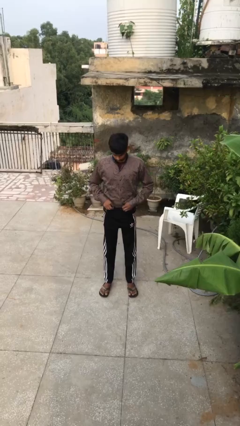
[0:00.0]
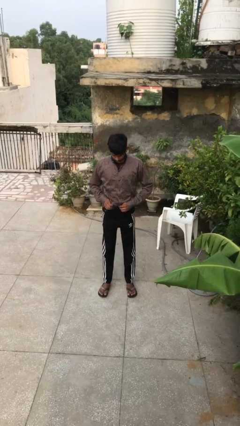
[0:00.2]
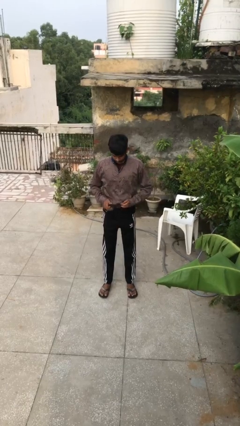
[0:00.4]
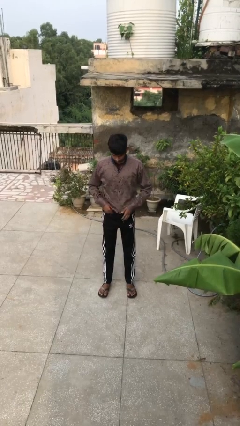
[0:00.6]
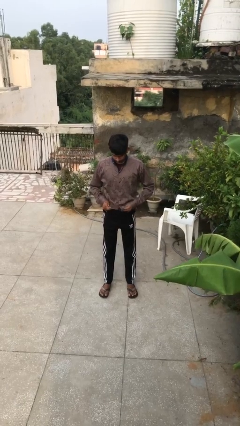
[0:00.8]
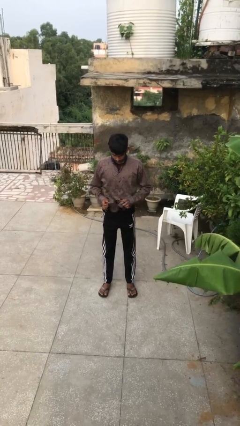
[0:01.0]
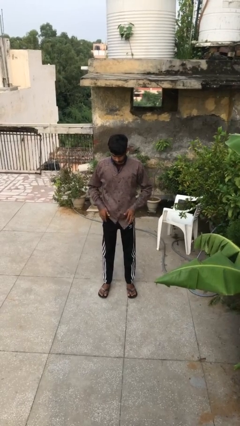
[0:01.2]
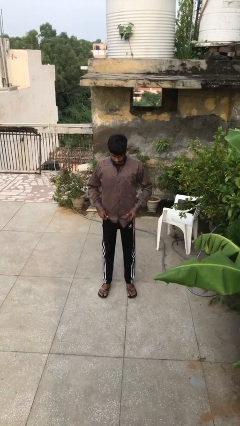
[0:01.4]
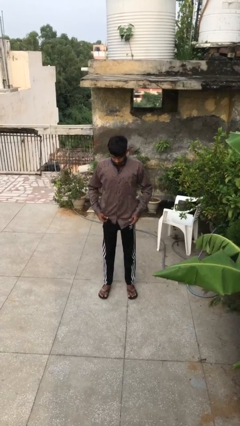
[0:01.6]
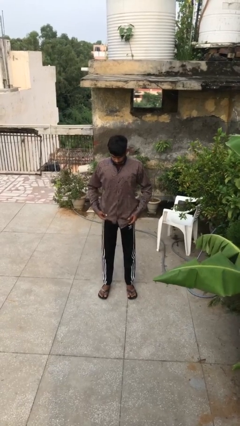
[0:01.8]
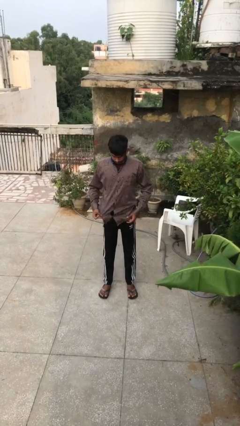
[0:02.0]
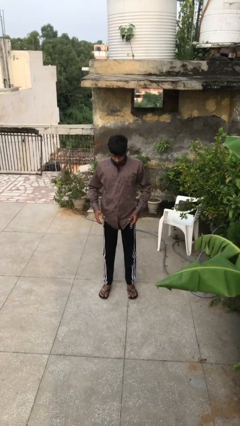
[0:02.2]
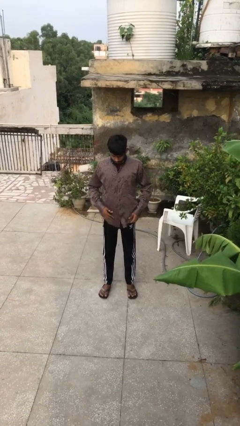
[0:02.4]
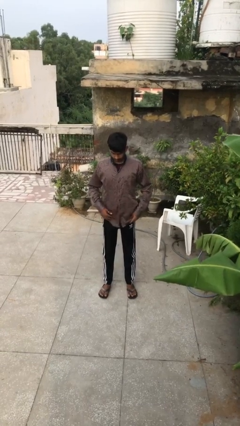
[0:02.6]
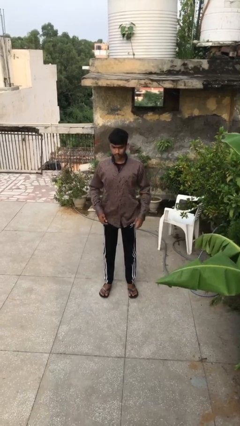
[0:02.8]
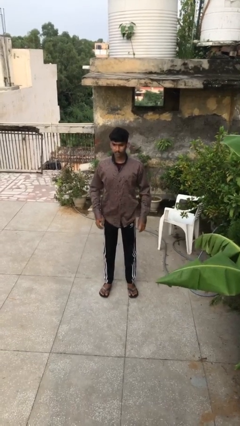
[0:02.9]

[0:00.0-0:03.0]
person untucks shirt

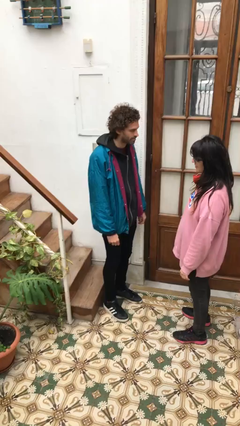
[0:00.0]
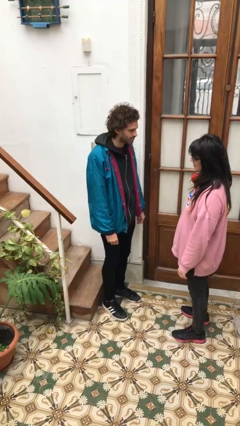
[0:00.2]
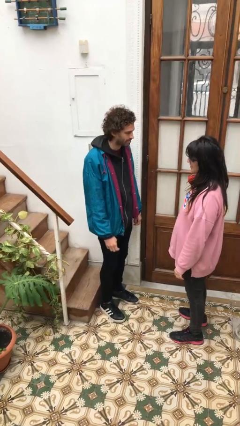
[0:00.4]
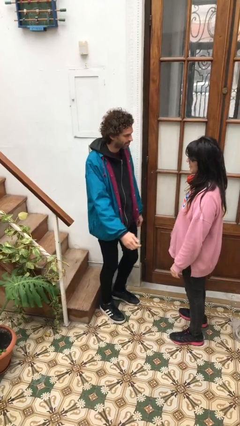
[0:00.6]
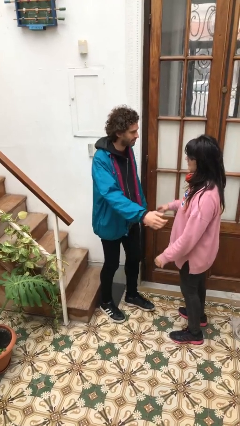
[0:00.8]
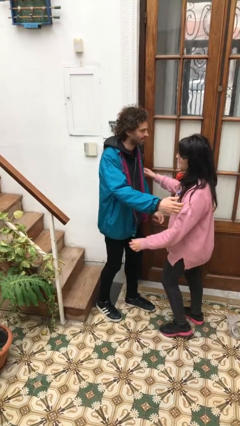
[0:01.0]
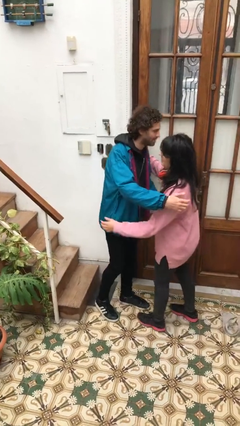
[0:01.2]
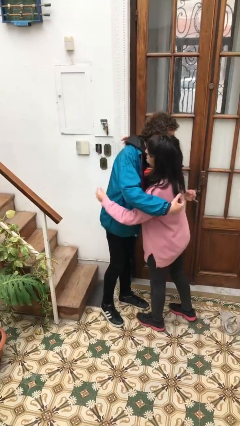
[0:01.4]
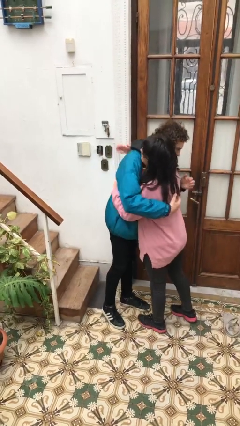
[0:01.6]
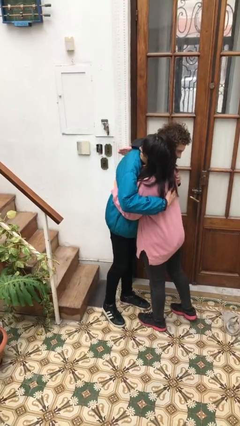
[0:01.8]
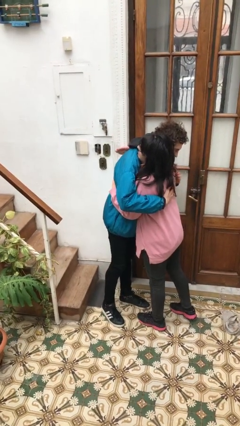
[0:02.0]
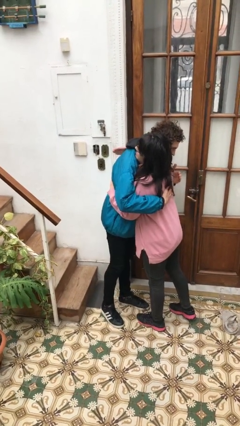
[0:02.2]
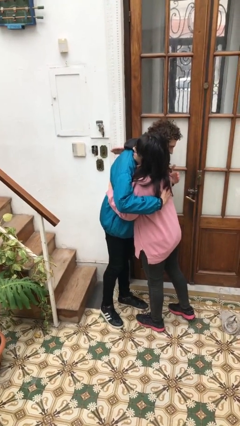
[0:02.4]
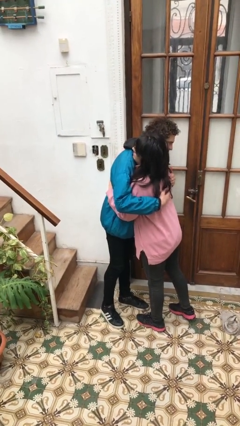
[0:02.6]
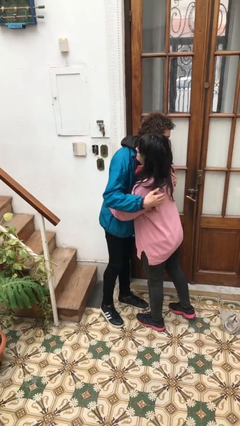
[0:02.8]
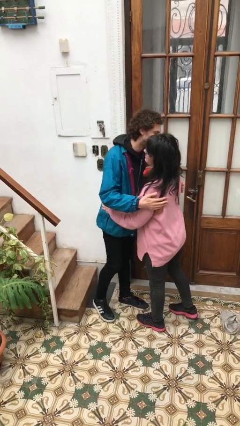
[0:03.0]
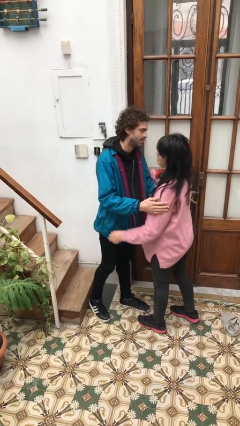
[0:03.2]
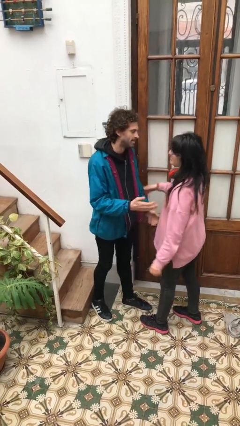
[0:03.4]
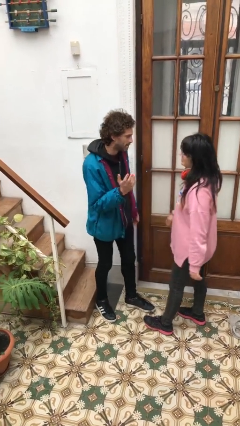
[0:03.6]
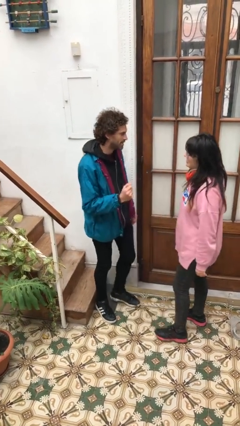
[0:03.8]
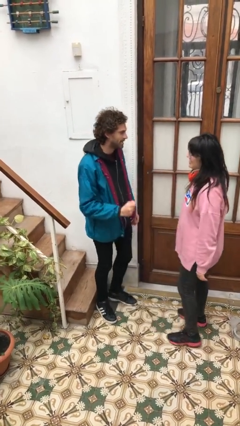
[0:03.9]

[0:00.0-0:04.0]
person embraces person

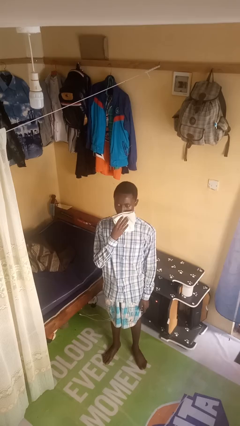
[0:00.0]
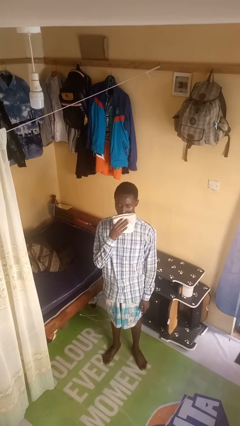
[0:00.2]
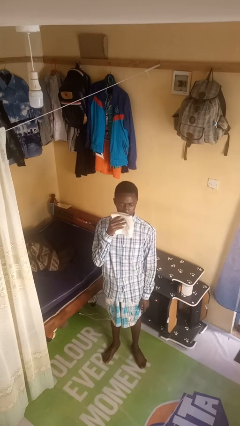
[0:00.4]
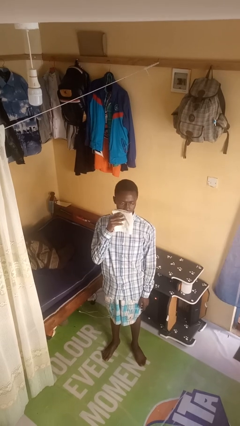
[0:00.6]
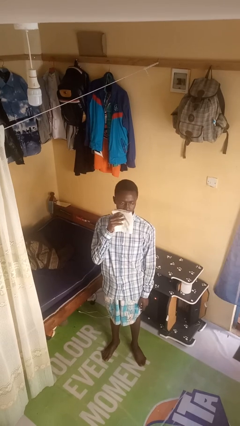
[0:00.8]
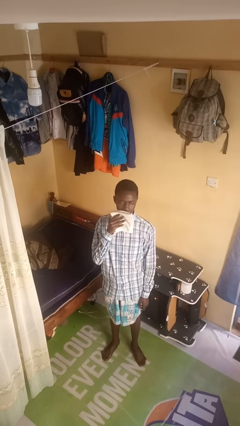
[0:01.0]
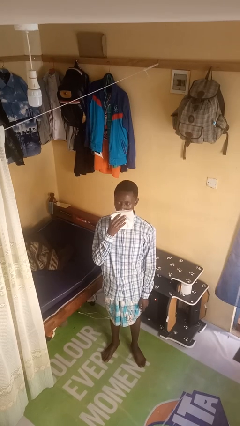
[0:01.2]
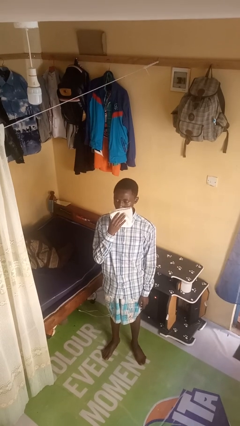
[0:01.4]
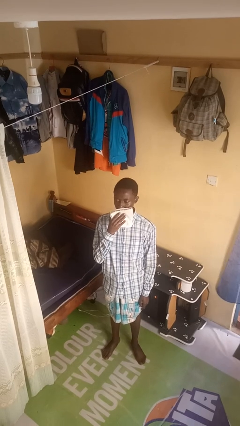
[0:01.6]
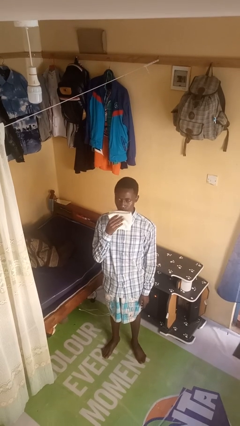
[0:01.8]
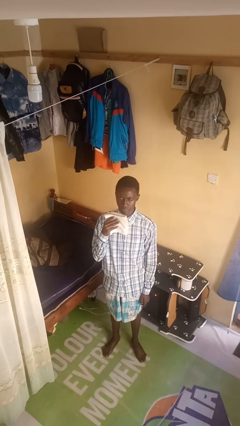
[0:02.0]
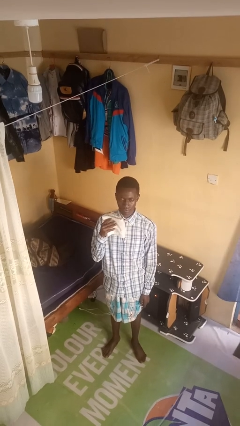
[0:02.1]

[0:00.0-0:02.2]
person wipes mouth with napkin

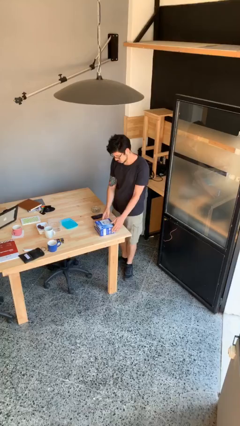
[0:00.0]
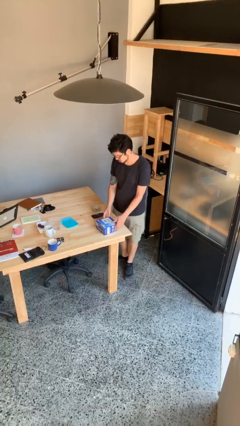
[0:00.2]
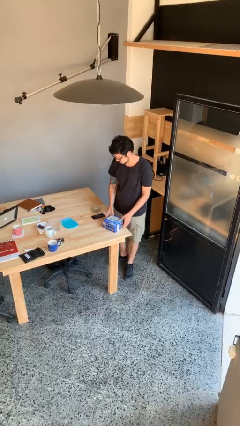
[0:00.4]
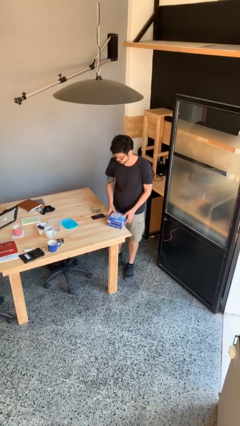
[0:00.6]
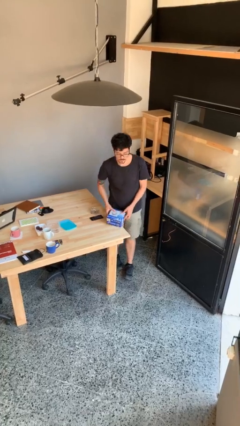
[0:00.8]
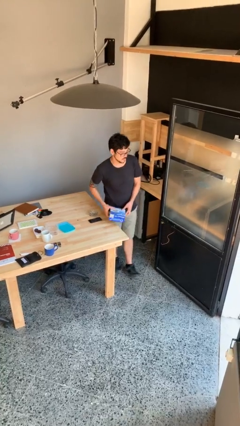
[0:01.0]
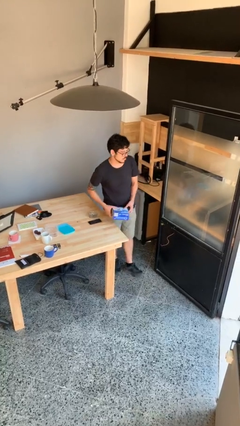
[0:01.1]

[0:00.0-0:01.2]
person picks up object from table

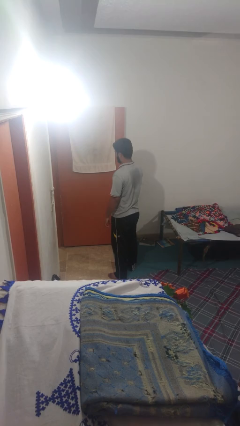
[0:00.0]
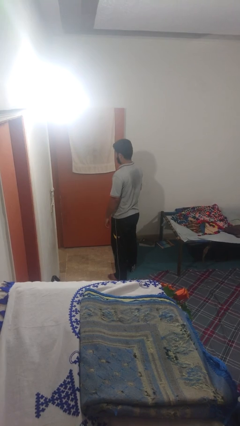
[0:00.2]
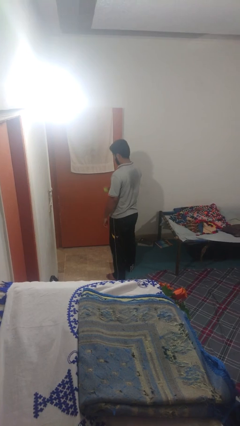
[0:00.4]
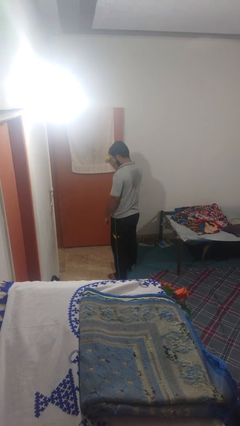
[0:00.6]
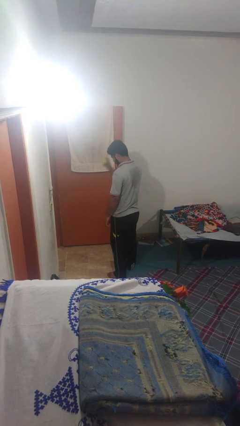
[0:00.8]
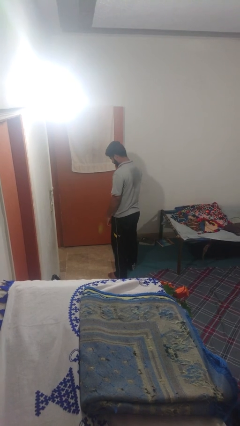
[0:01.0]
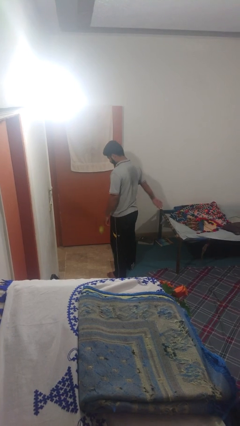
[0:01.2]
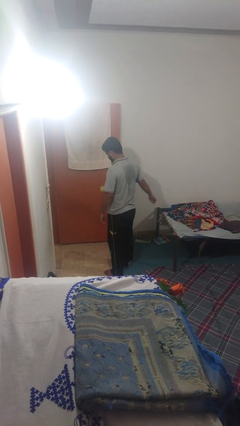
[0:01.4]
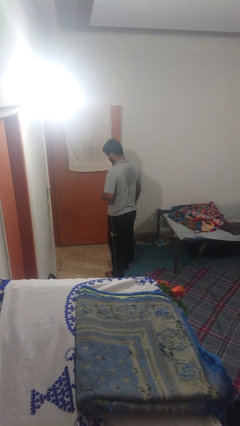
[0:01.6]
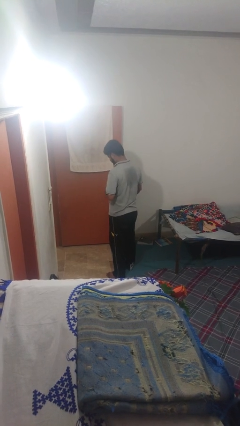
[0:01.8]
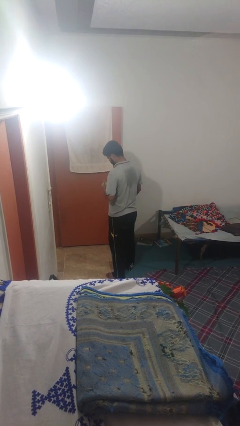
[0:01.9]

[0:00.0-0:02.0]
person bounces ball on floor

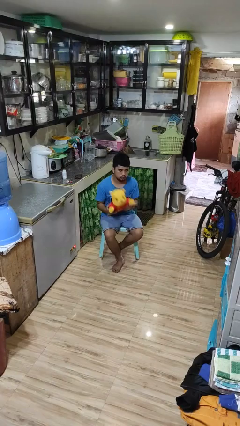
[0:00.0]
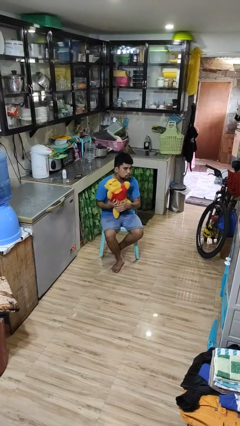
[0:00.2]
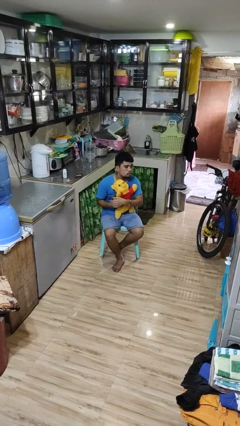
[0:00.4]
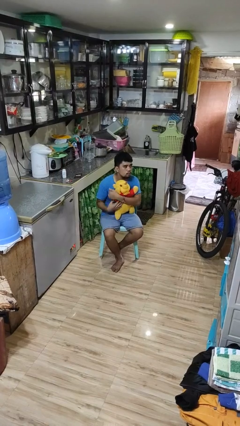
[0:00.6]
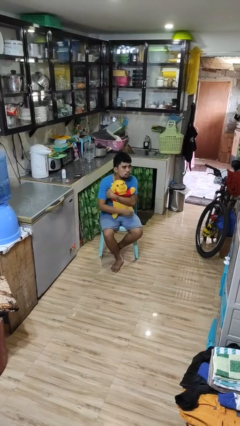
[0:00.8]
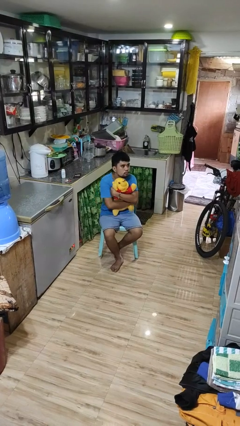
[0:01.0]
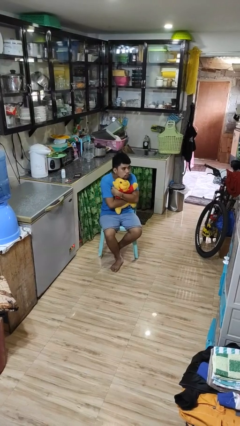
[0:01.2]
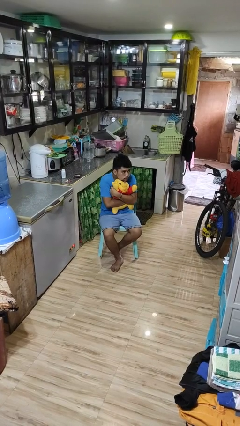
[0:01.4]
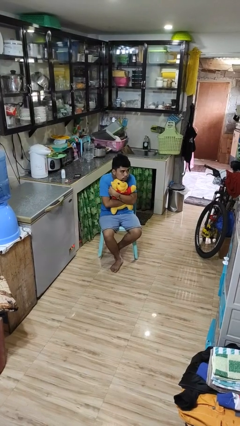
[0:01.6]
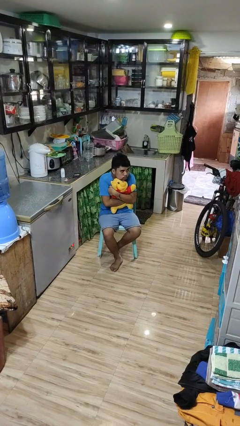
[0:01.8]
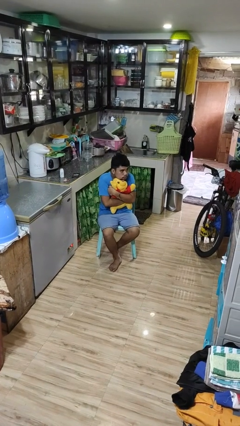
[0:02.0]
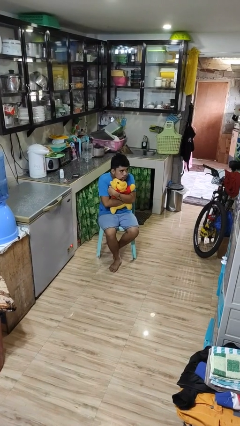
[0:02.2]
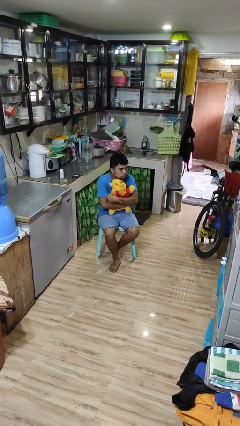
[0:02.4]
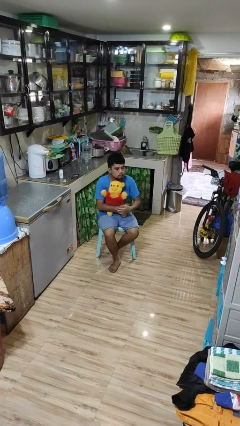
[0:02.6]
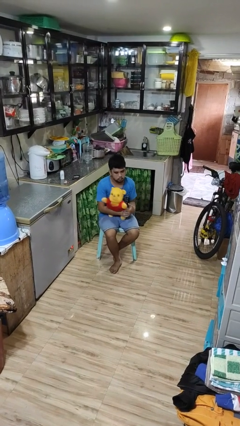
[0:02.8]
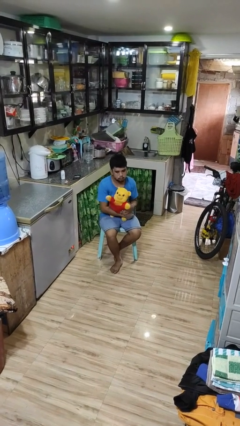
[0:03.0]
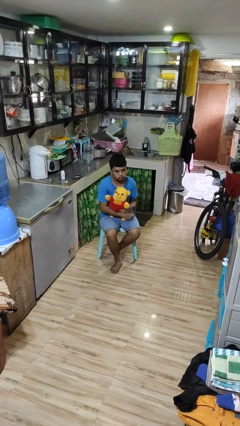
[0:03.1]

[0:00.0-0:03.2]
person hugs stuffed animal

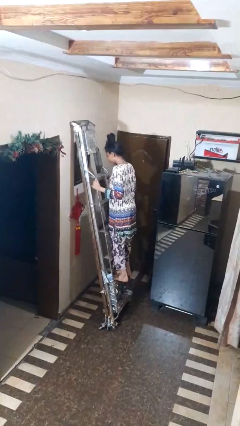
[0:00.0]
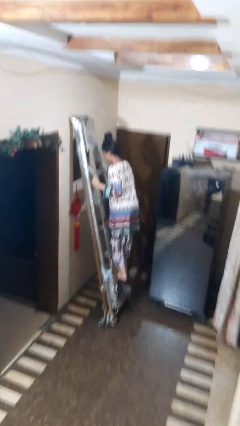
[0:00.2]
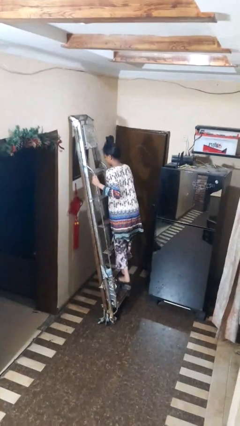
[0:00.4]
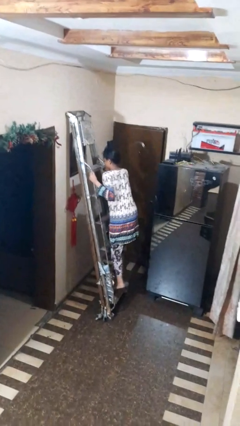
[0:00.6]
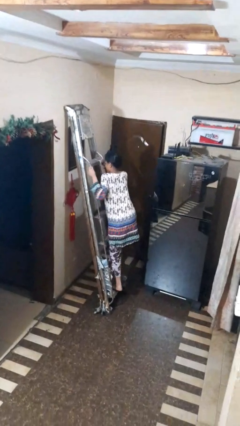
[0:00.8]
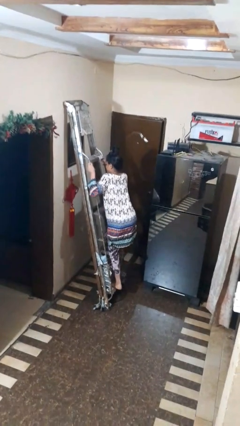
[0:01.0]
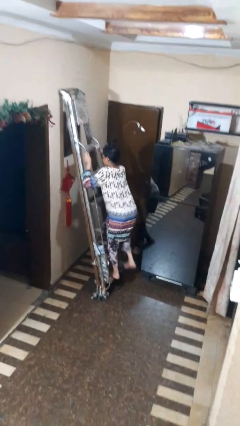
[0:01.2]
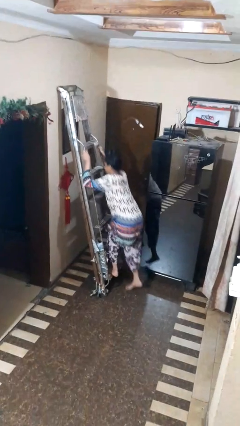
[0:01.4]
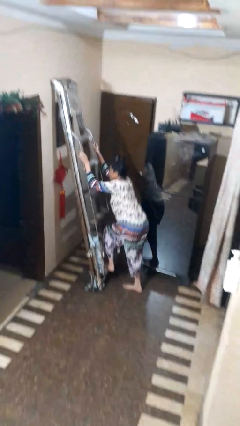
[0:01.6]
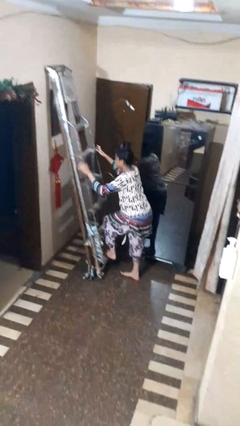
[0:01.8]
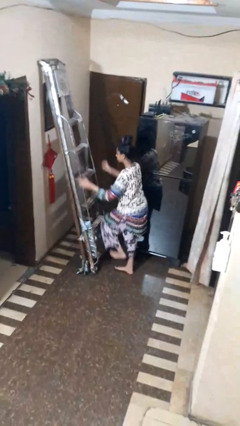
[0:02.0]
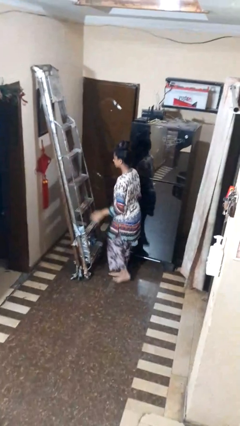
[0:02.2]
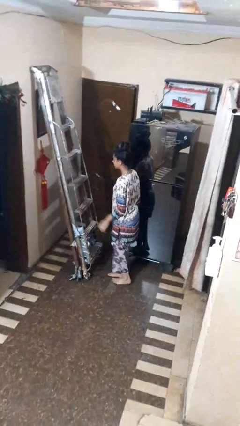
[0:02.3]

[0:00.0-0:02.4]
person climbs down ladder
